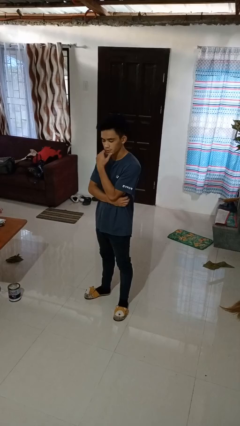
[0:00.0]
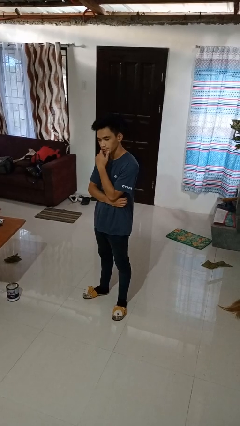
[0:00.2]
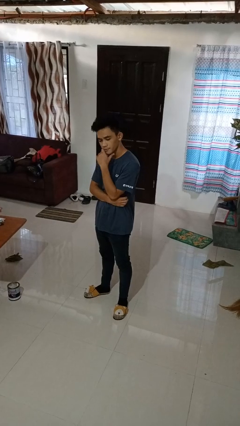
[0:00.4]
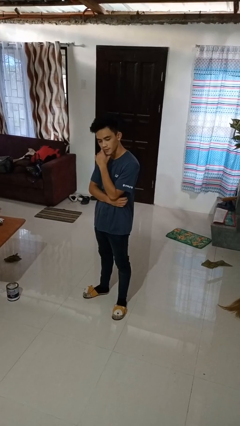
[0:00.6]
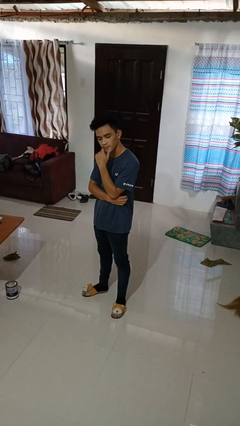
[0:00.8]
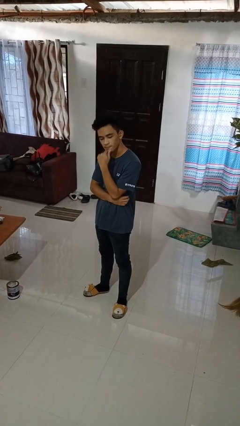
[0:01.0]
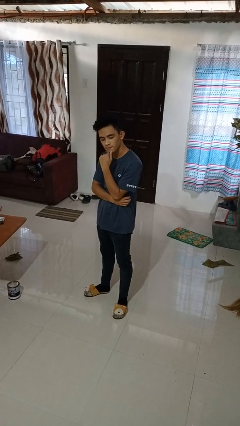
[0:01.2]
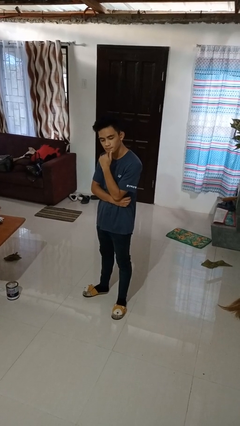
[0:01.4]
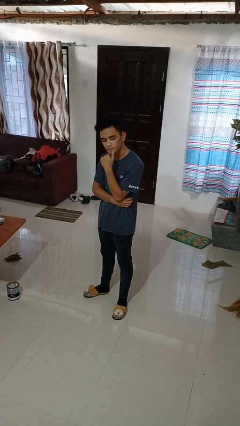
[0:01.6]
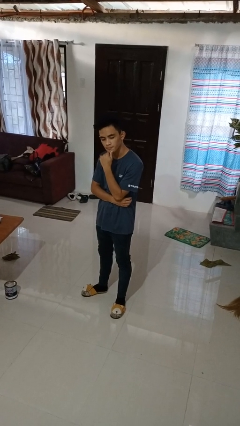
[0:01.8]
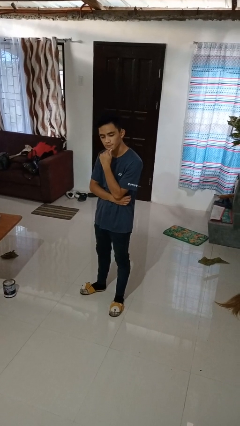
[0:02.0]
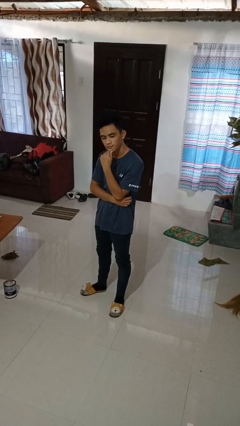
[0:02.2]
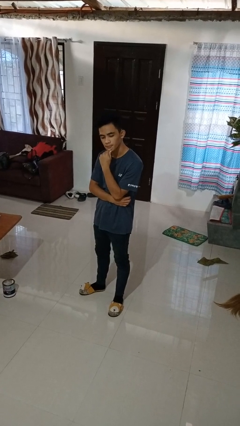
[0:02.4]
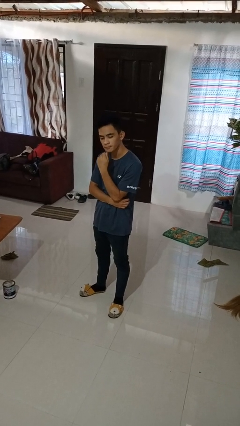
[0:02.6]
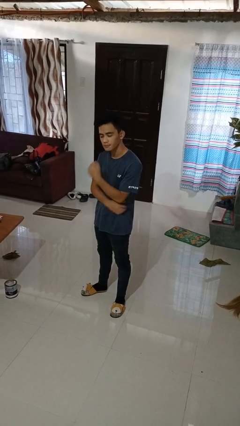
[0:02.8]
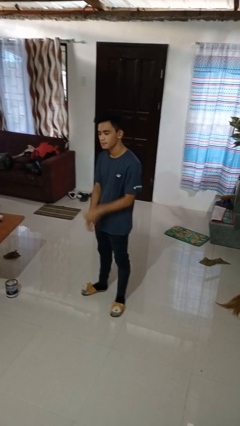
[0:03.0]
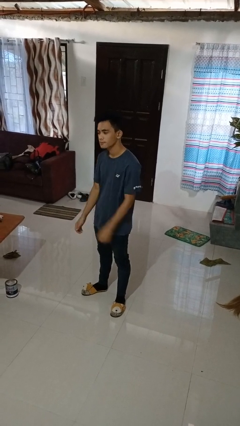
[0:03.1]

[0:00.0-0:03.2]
person strokes chin

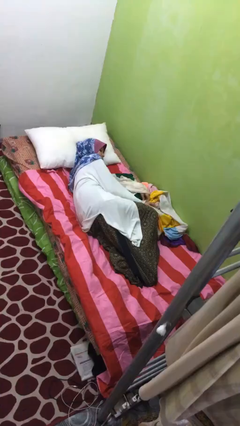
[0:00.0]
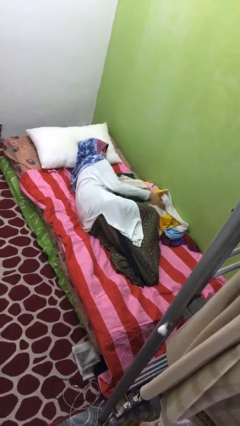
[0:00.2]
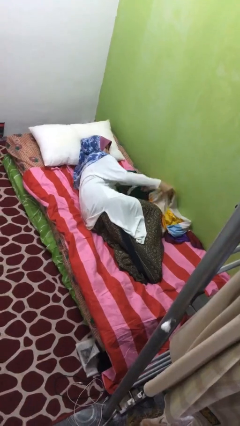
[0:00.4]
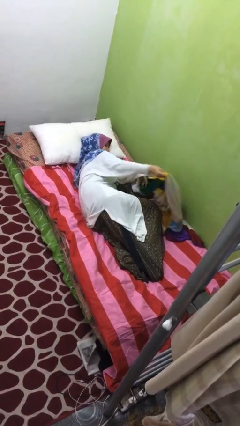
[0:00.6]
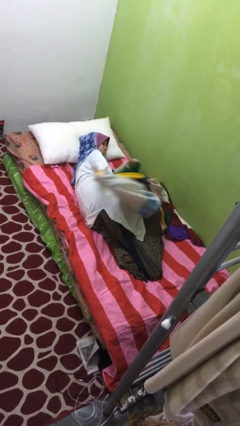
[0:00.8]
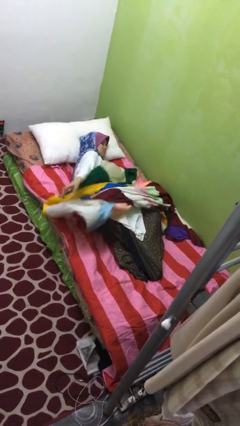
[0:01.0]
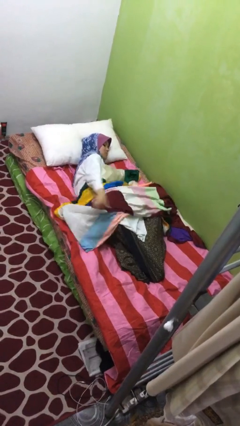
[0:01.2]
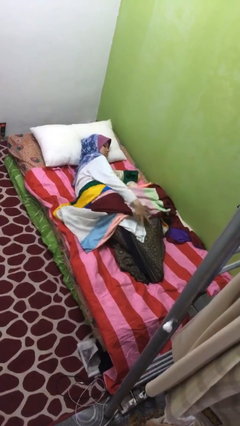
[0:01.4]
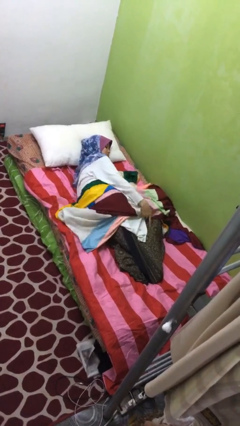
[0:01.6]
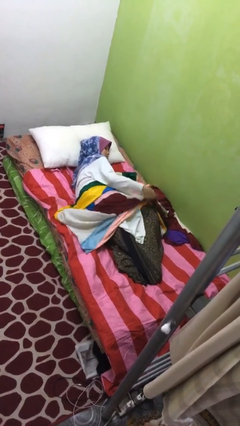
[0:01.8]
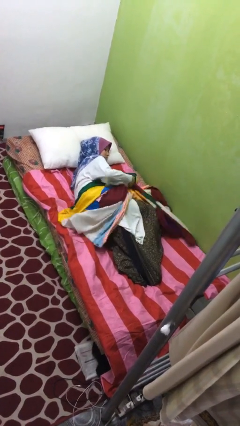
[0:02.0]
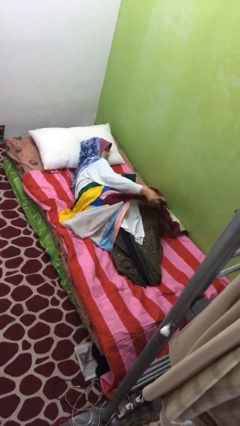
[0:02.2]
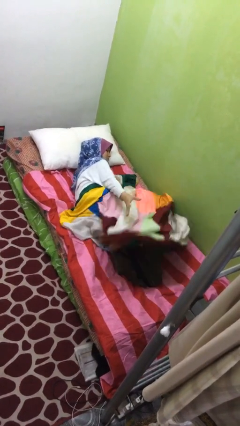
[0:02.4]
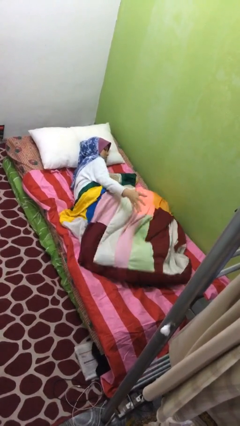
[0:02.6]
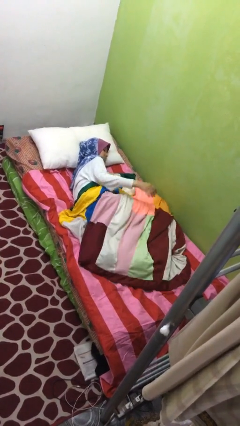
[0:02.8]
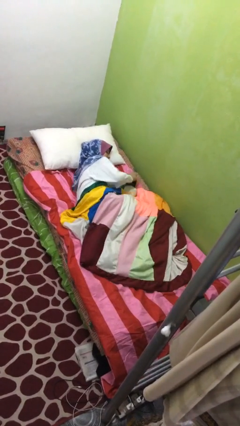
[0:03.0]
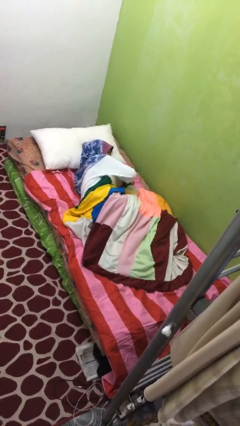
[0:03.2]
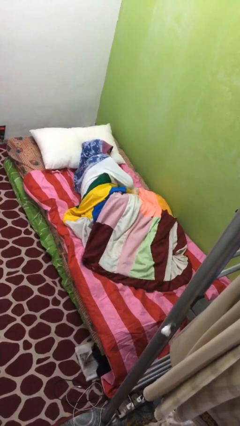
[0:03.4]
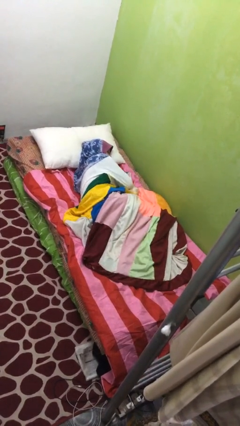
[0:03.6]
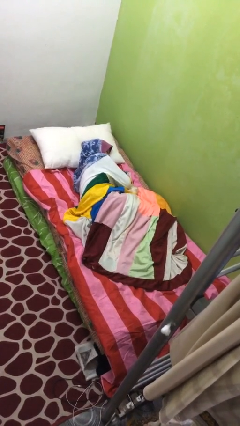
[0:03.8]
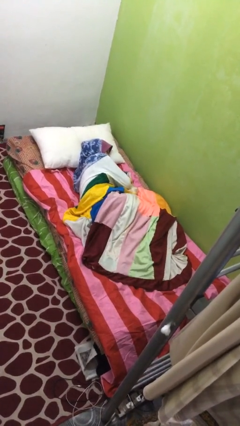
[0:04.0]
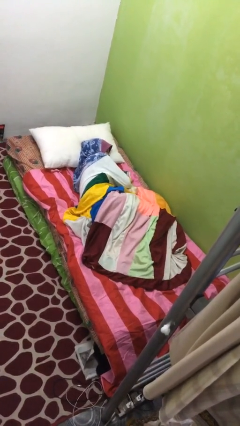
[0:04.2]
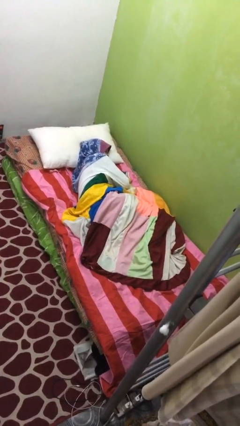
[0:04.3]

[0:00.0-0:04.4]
person covers with blanket

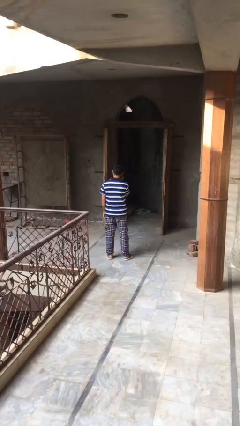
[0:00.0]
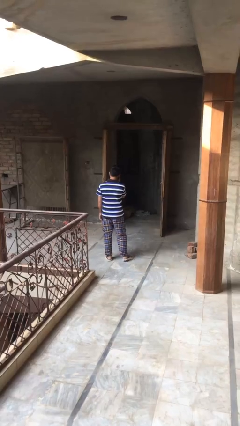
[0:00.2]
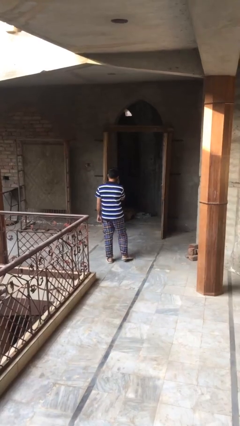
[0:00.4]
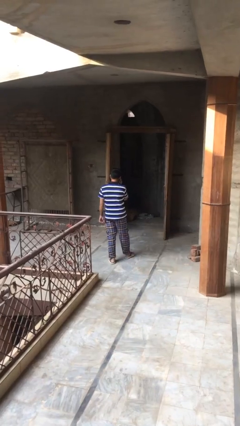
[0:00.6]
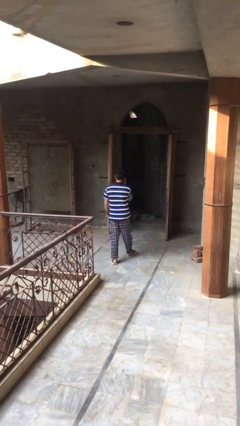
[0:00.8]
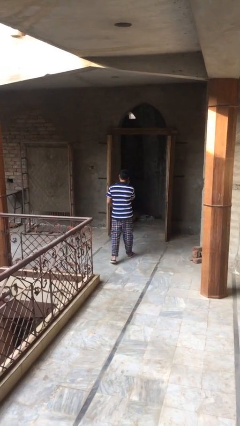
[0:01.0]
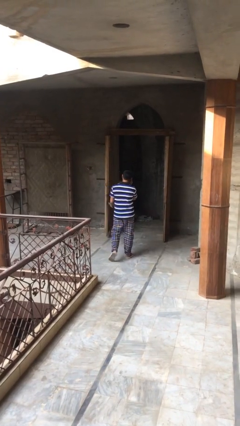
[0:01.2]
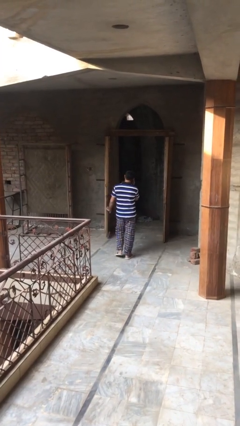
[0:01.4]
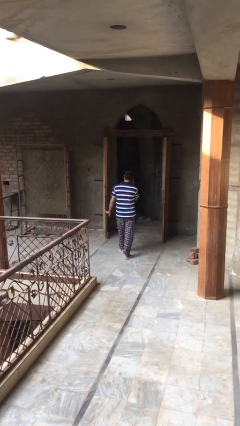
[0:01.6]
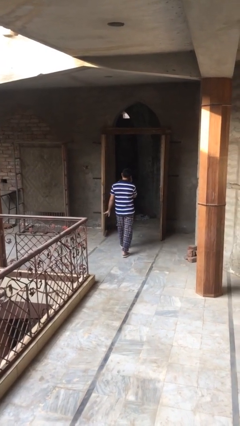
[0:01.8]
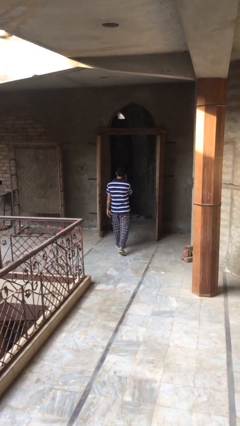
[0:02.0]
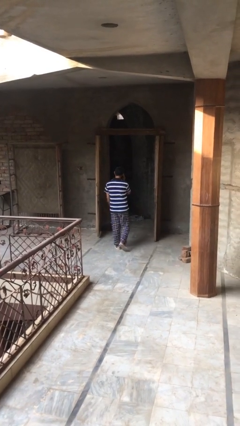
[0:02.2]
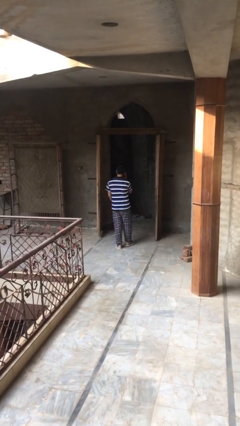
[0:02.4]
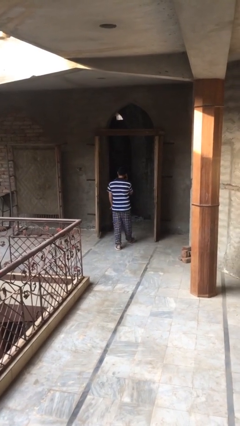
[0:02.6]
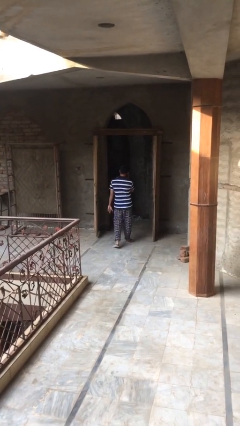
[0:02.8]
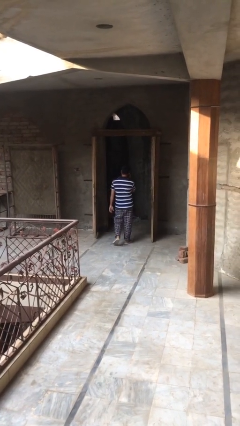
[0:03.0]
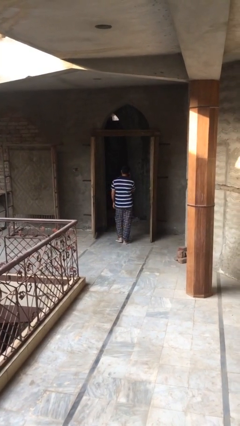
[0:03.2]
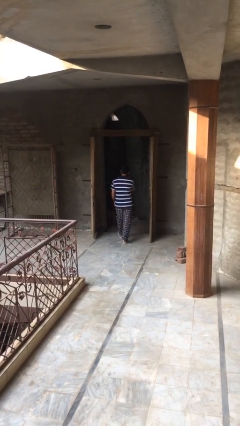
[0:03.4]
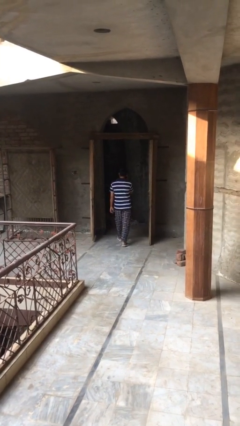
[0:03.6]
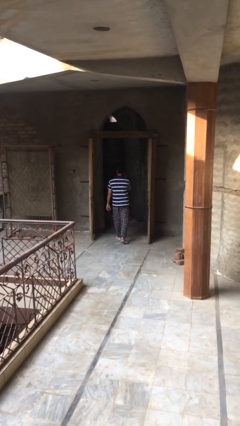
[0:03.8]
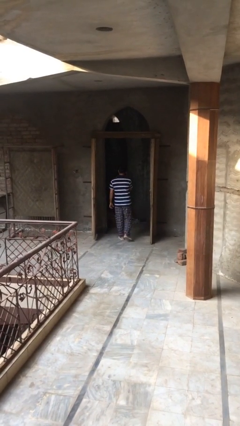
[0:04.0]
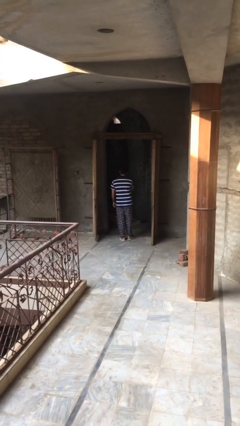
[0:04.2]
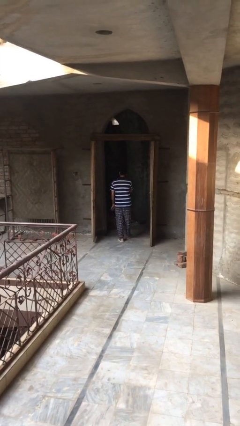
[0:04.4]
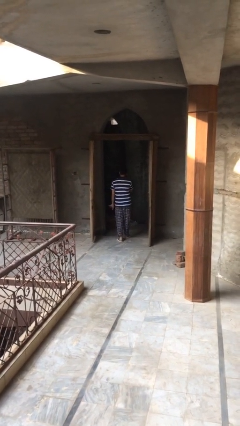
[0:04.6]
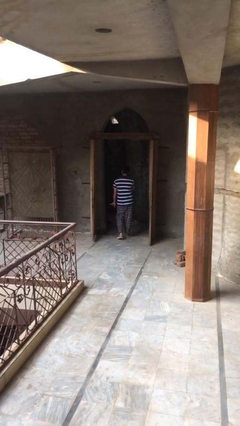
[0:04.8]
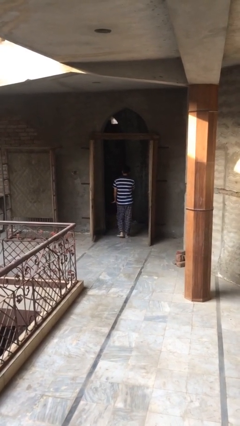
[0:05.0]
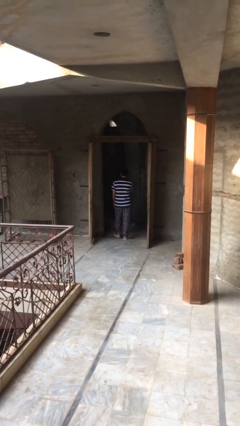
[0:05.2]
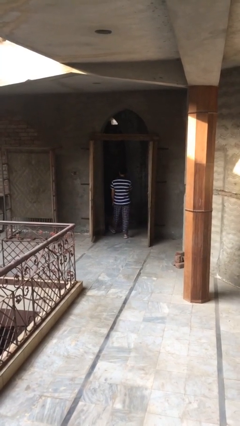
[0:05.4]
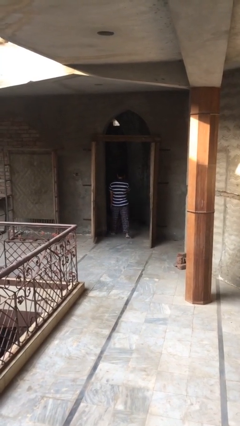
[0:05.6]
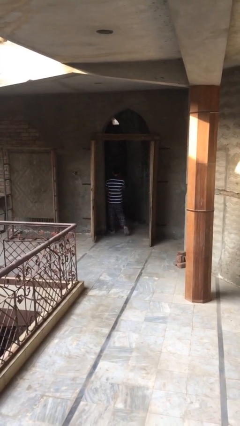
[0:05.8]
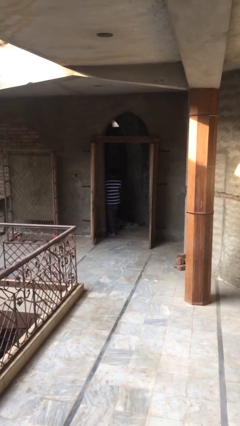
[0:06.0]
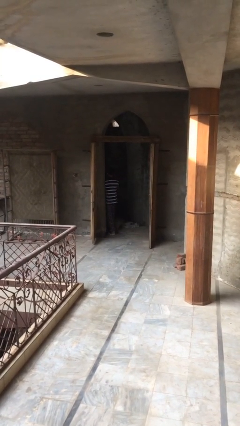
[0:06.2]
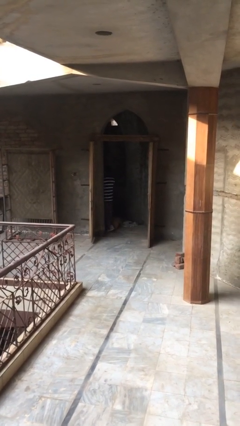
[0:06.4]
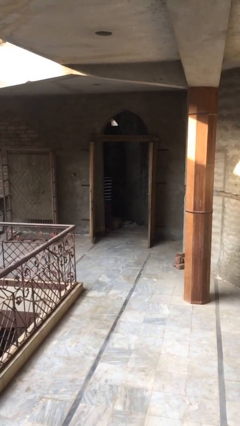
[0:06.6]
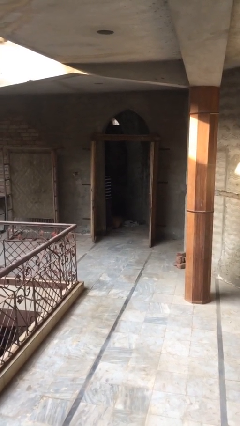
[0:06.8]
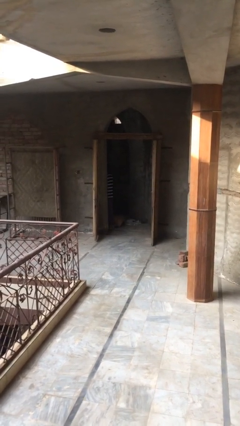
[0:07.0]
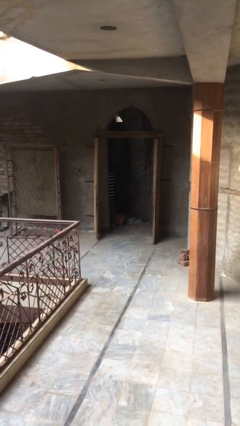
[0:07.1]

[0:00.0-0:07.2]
person exits scene through structure

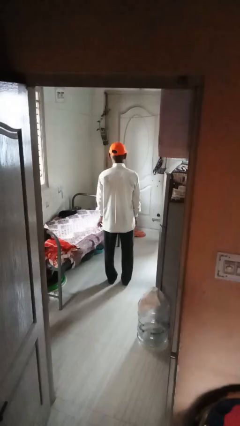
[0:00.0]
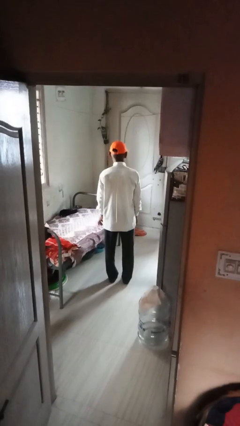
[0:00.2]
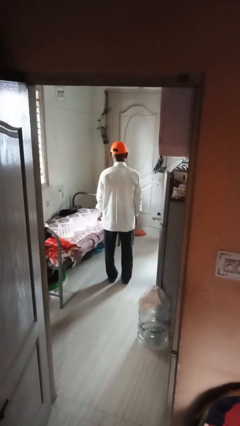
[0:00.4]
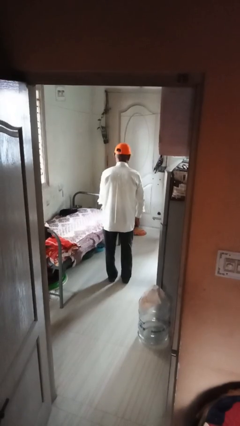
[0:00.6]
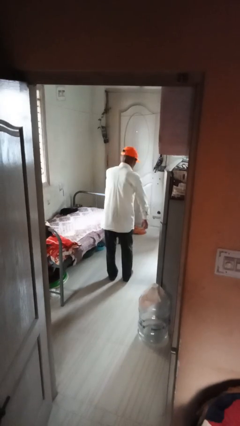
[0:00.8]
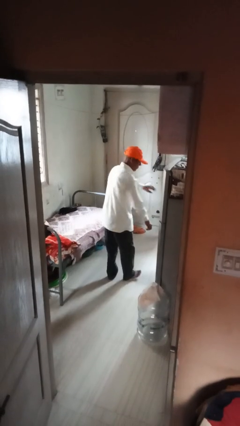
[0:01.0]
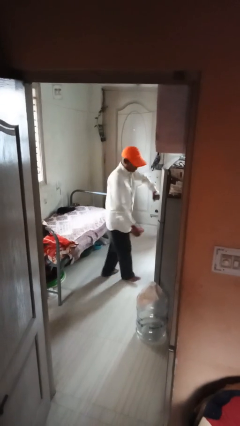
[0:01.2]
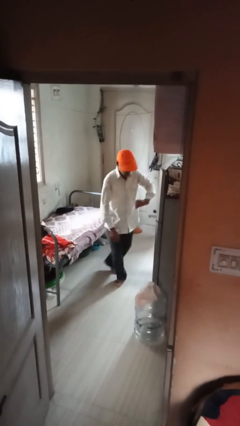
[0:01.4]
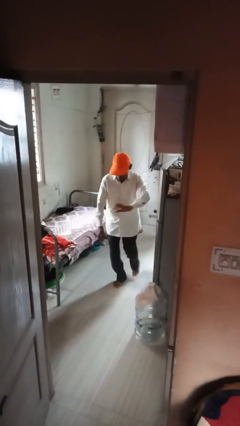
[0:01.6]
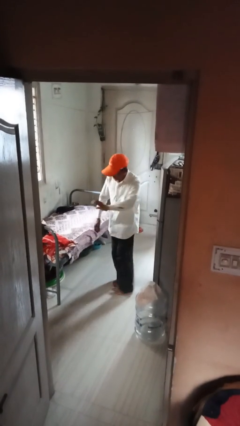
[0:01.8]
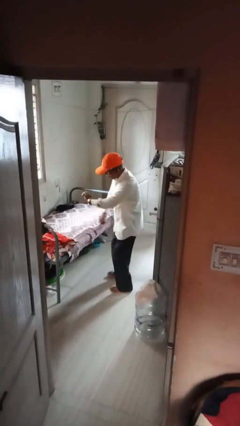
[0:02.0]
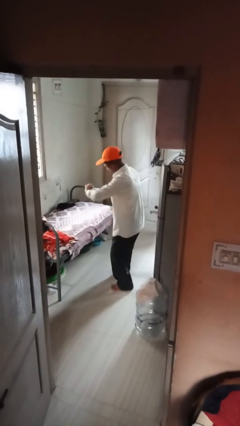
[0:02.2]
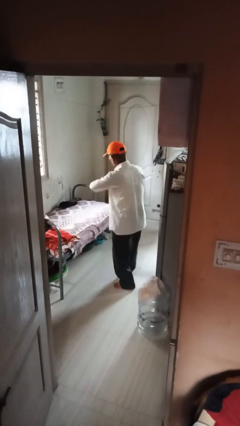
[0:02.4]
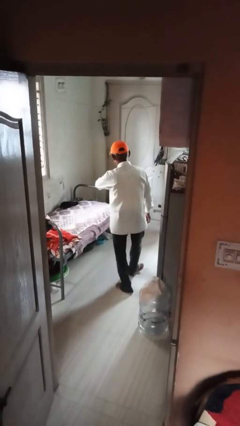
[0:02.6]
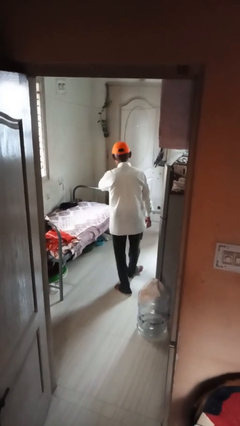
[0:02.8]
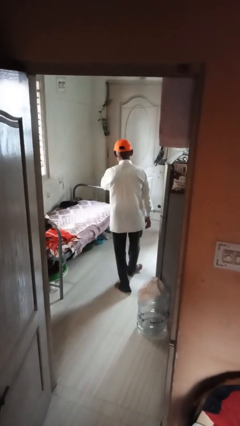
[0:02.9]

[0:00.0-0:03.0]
person twirls
